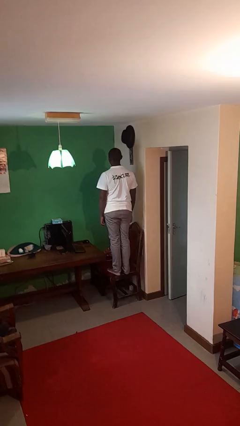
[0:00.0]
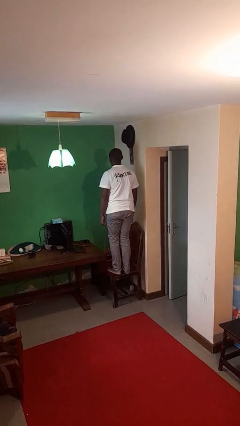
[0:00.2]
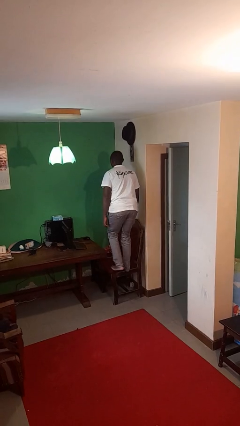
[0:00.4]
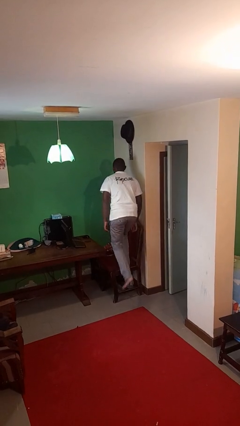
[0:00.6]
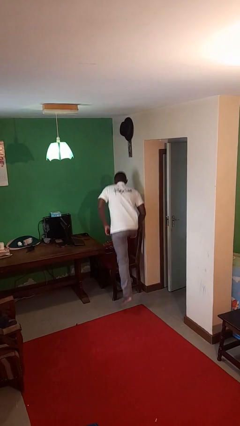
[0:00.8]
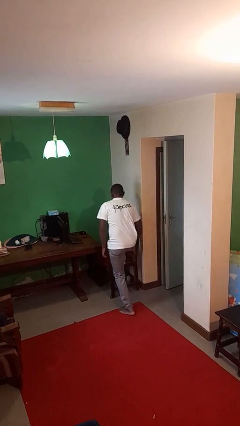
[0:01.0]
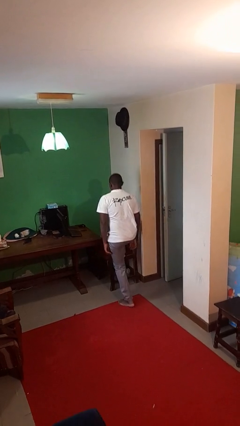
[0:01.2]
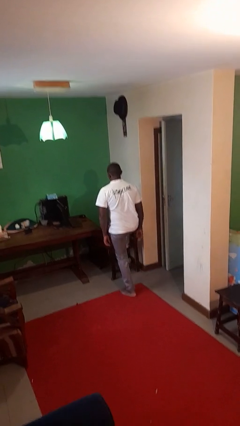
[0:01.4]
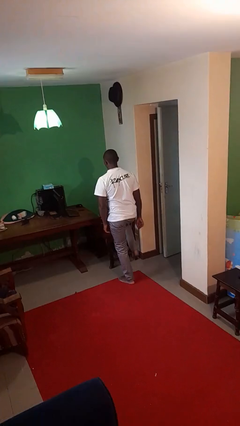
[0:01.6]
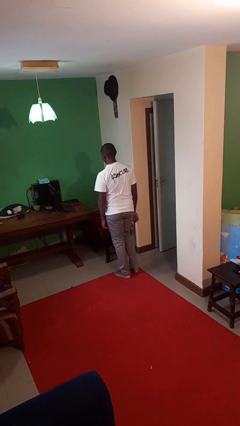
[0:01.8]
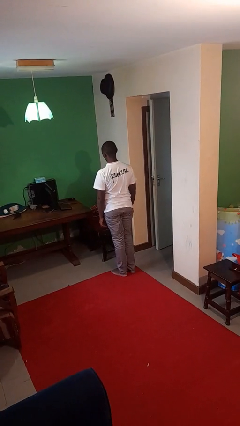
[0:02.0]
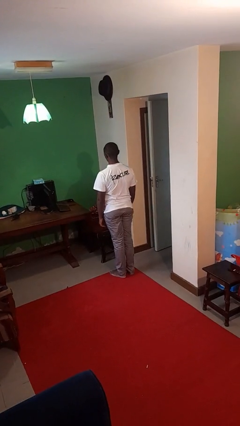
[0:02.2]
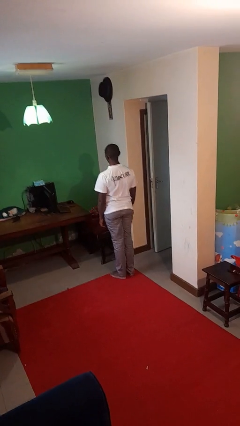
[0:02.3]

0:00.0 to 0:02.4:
person climbs off chair

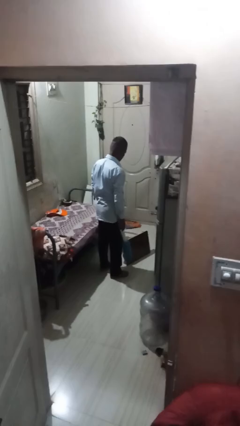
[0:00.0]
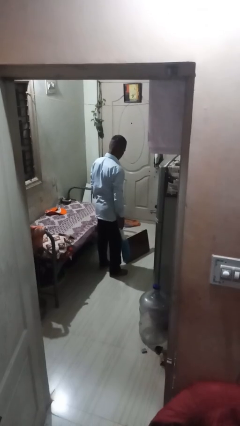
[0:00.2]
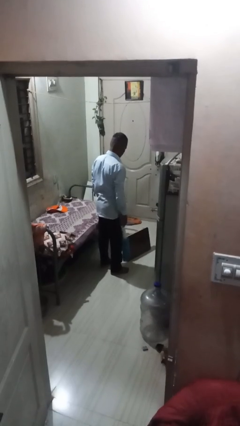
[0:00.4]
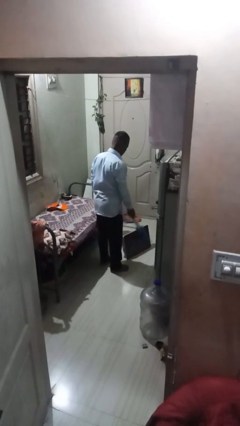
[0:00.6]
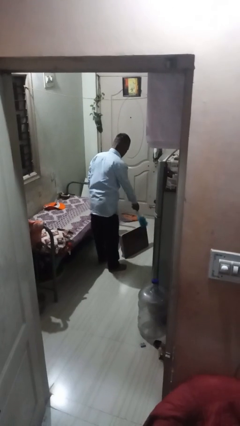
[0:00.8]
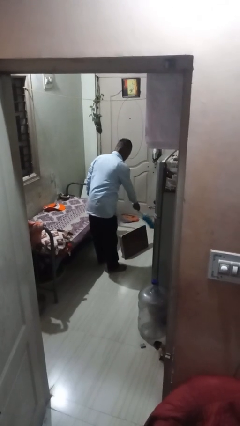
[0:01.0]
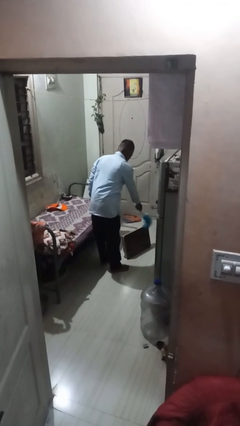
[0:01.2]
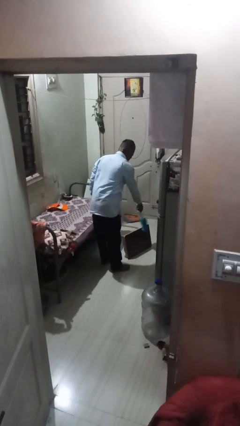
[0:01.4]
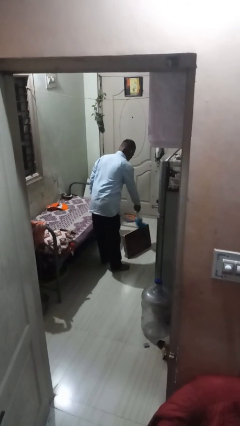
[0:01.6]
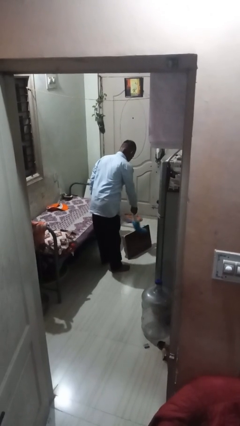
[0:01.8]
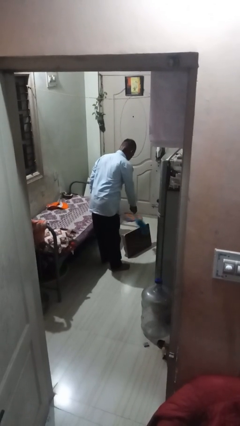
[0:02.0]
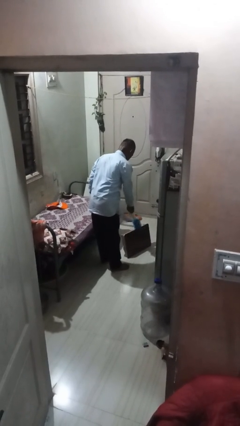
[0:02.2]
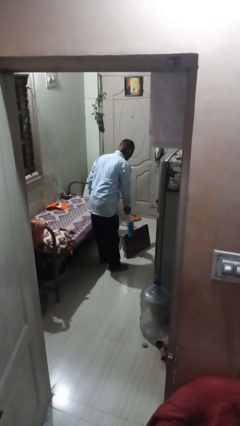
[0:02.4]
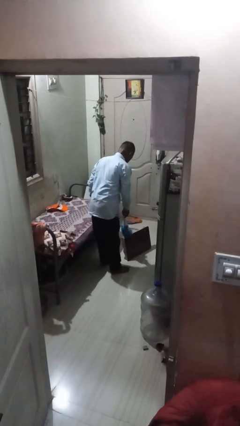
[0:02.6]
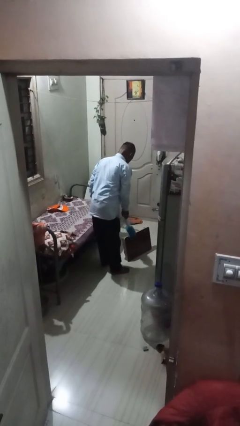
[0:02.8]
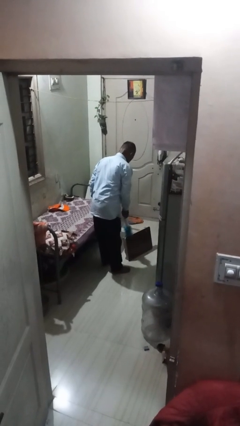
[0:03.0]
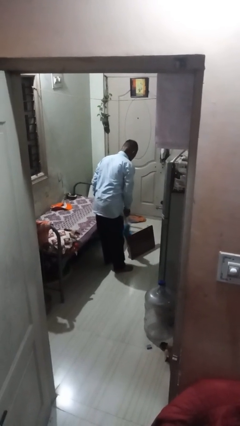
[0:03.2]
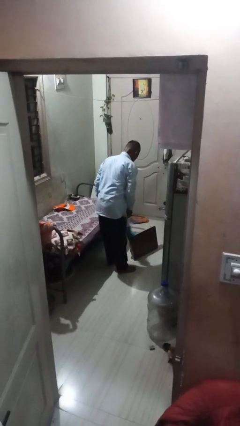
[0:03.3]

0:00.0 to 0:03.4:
person dusts furniture

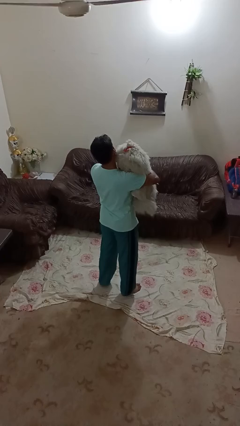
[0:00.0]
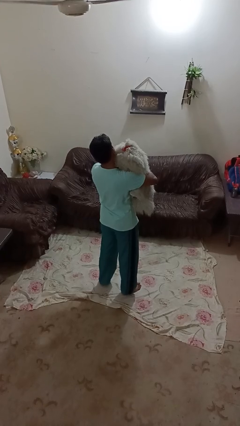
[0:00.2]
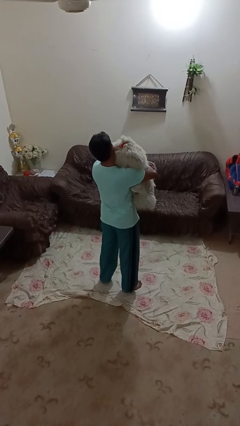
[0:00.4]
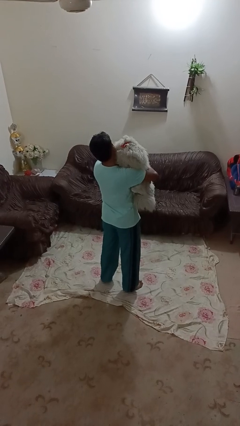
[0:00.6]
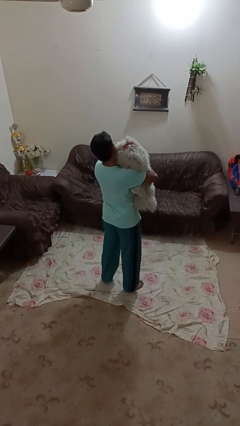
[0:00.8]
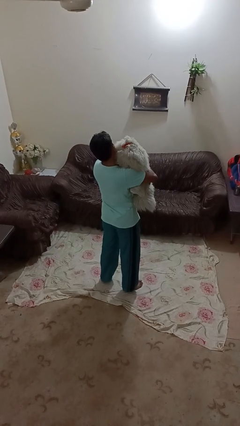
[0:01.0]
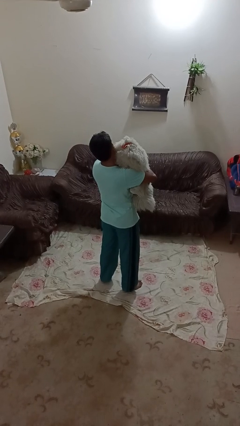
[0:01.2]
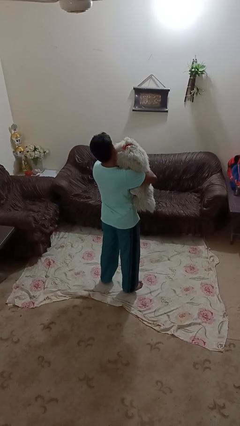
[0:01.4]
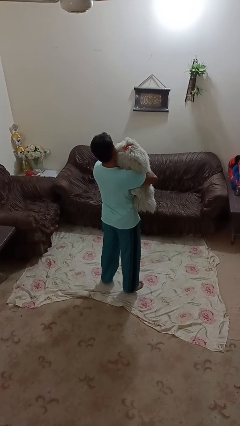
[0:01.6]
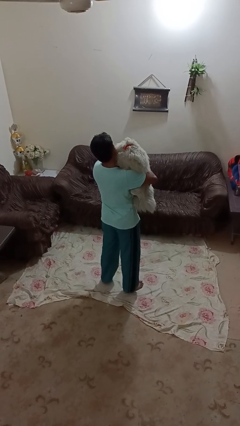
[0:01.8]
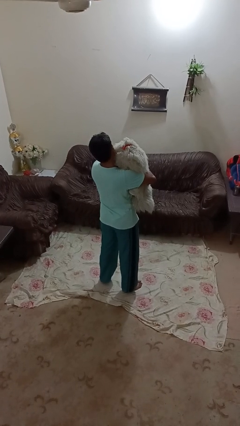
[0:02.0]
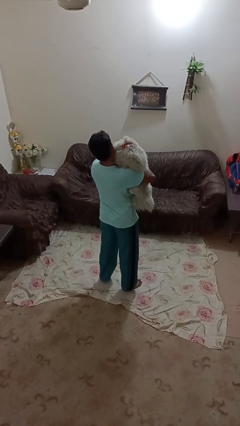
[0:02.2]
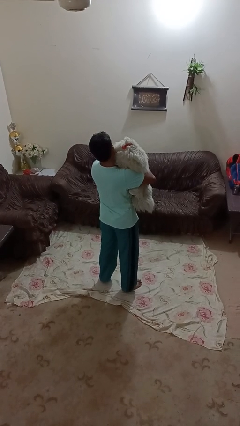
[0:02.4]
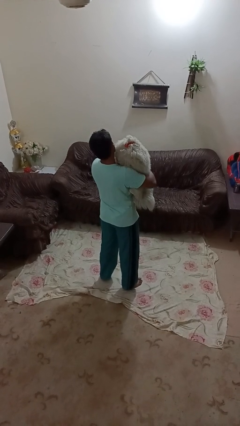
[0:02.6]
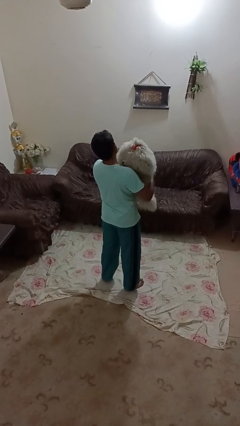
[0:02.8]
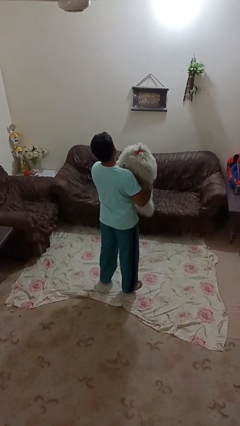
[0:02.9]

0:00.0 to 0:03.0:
person hugs stuffed animal

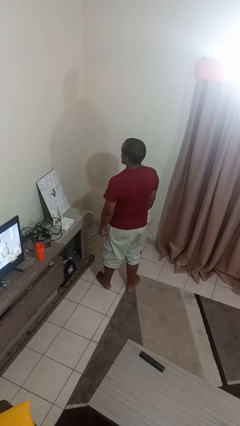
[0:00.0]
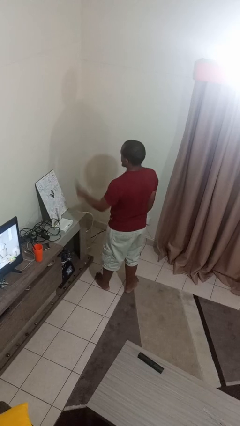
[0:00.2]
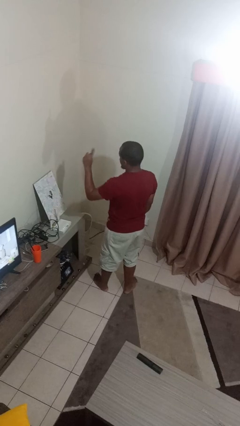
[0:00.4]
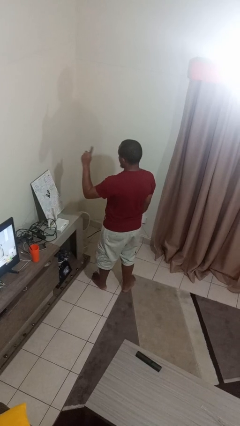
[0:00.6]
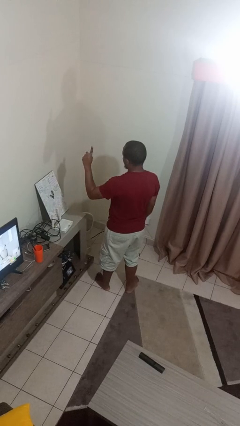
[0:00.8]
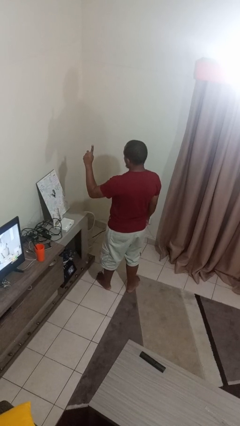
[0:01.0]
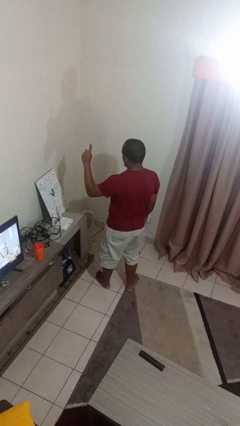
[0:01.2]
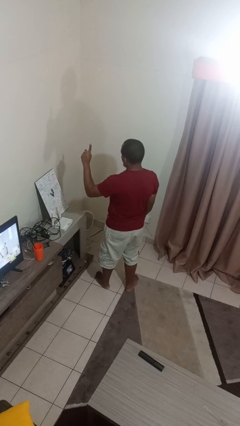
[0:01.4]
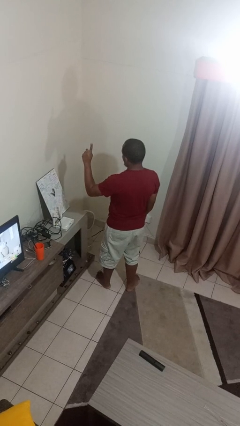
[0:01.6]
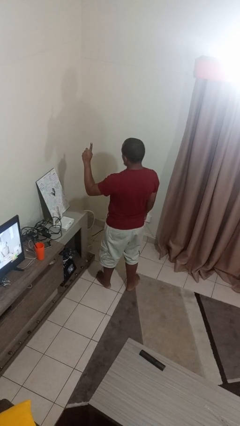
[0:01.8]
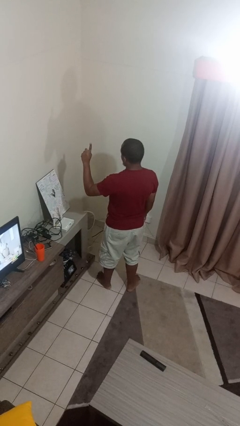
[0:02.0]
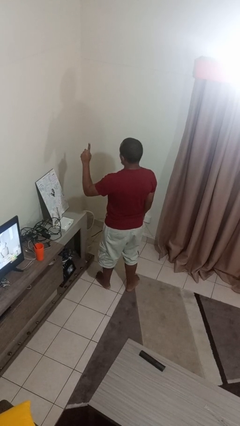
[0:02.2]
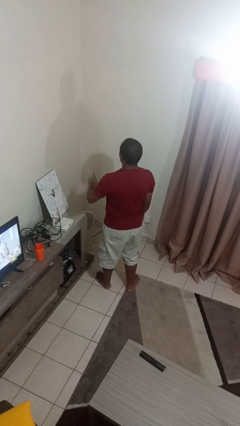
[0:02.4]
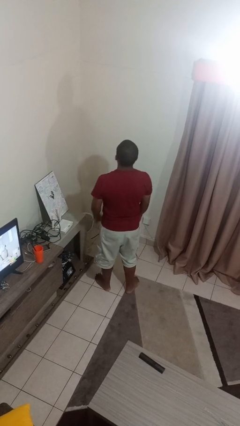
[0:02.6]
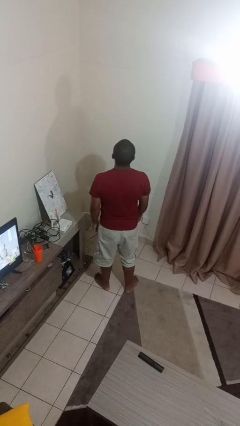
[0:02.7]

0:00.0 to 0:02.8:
person gestures number one

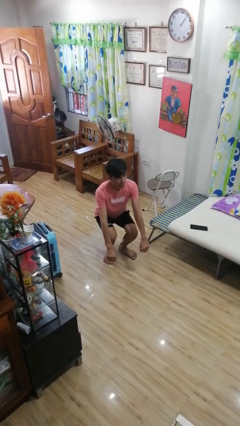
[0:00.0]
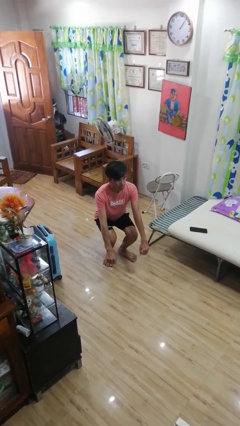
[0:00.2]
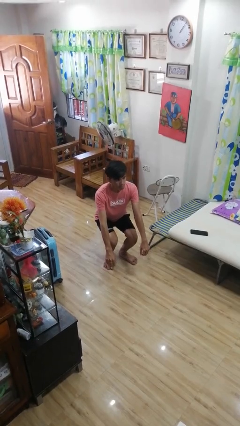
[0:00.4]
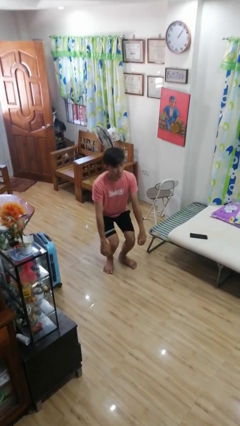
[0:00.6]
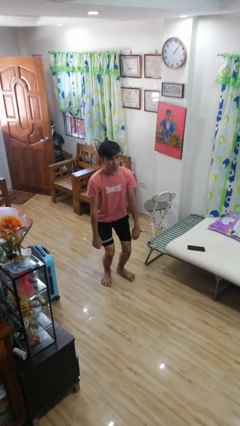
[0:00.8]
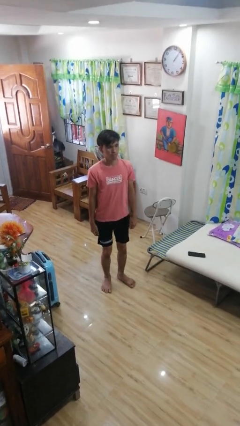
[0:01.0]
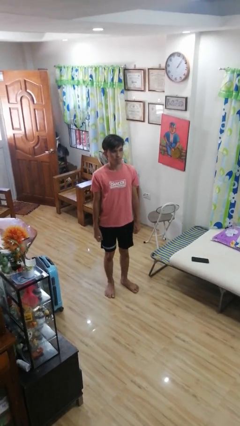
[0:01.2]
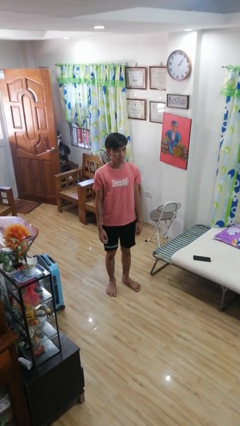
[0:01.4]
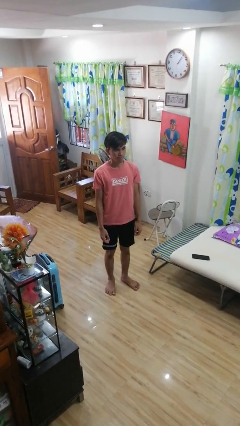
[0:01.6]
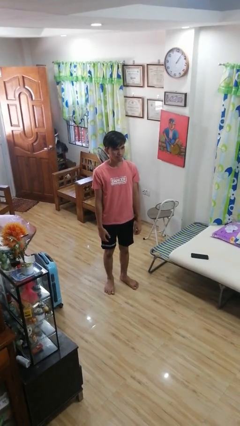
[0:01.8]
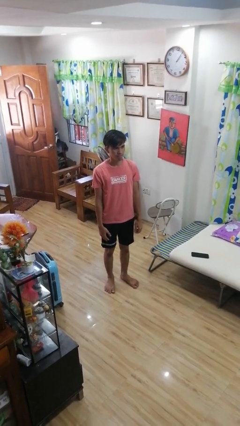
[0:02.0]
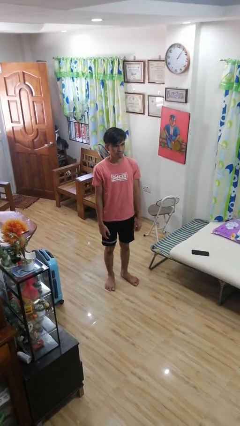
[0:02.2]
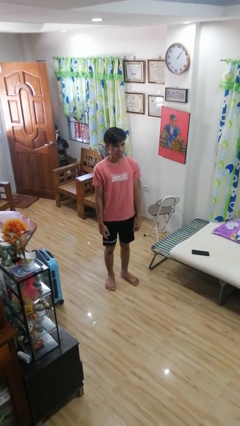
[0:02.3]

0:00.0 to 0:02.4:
person stands up

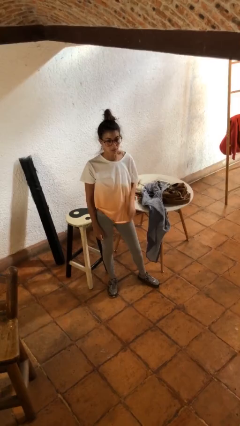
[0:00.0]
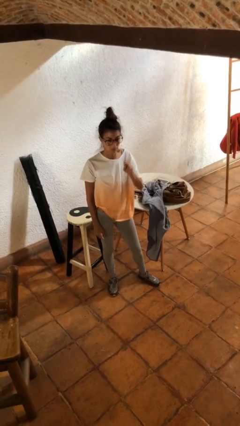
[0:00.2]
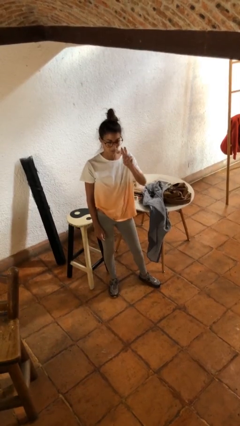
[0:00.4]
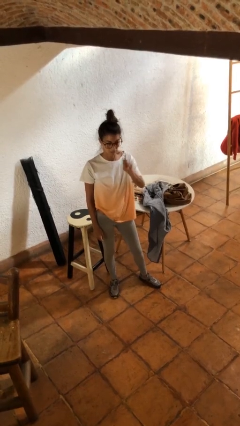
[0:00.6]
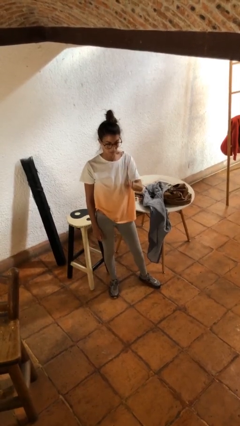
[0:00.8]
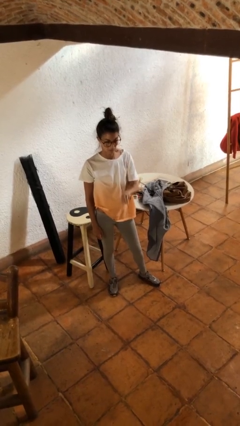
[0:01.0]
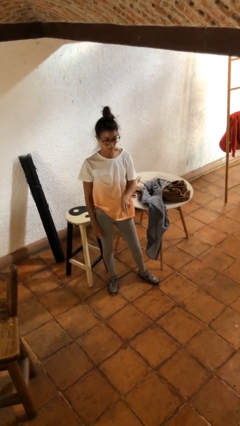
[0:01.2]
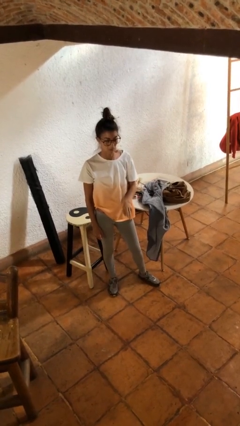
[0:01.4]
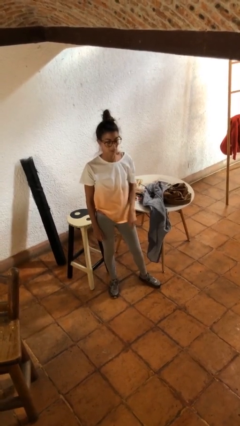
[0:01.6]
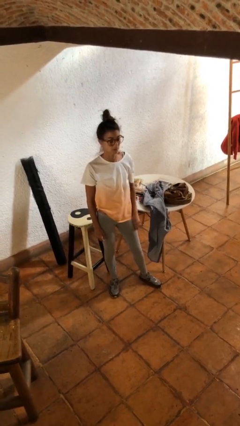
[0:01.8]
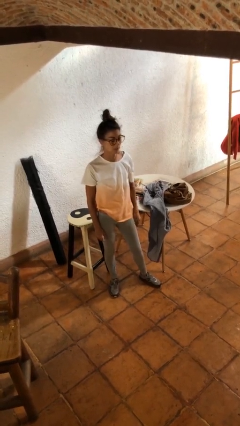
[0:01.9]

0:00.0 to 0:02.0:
person gestures swipe down

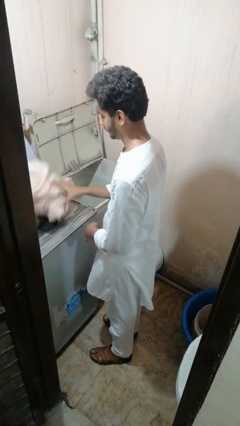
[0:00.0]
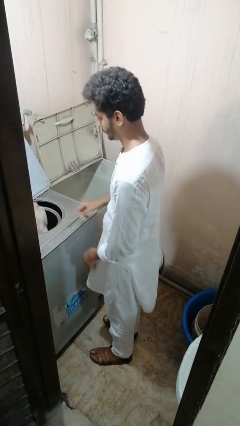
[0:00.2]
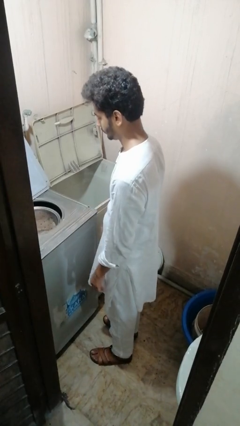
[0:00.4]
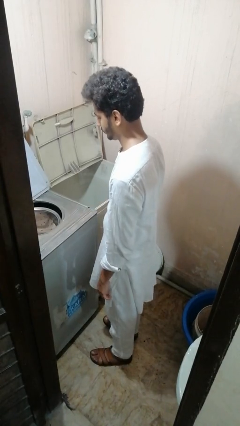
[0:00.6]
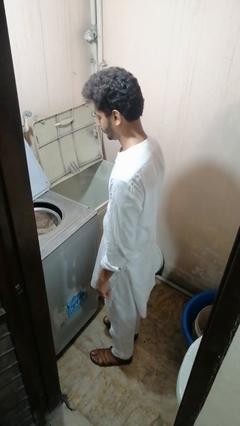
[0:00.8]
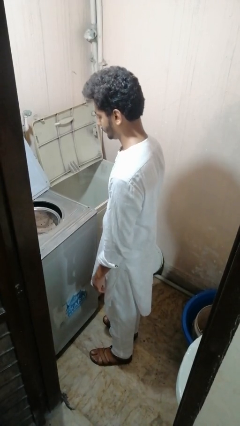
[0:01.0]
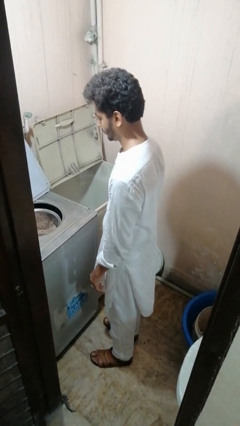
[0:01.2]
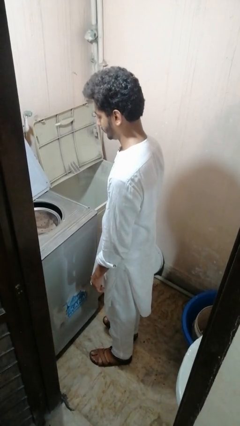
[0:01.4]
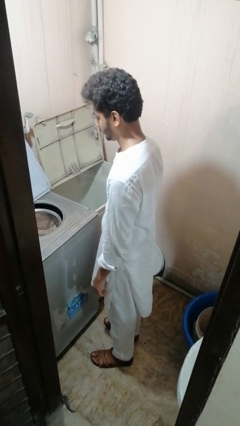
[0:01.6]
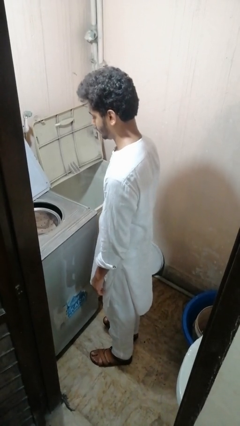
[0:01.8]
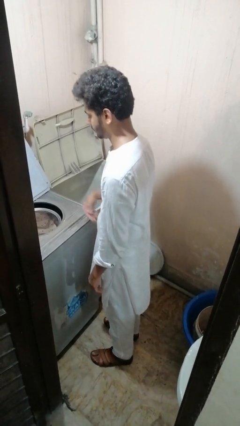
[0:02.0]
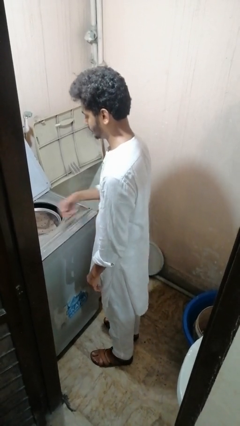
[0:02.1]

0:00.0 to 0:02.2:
person loads dryer
